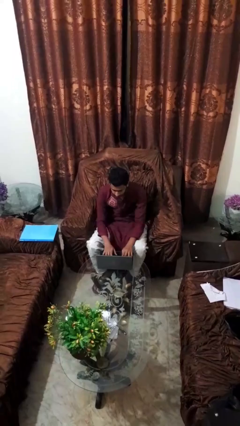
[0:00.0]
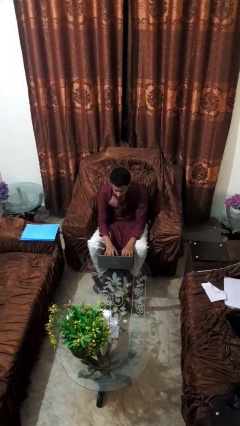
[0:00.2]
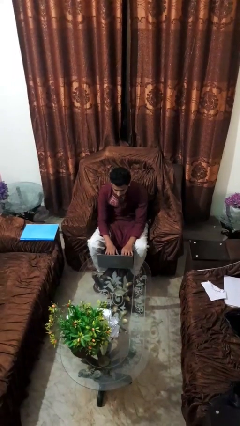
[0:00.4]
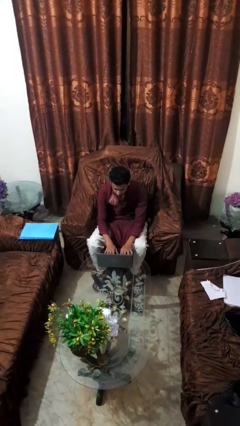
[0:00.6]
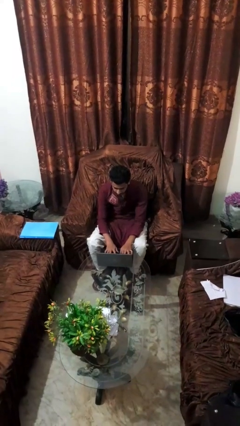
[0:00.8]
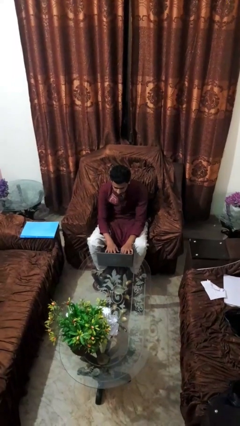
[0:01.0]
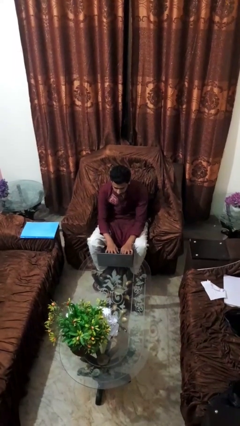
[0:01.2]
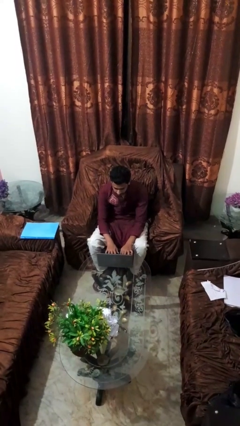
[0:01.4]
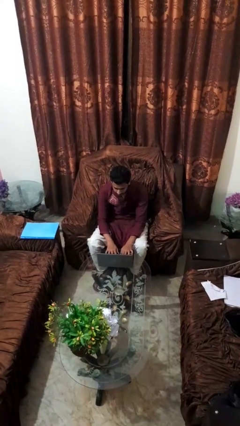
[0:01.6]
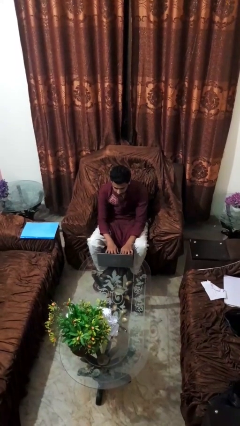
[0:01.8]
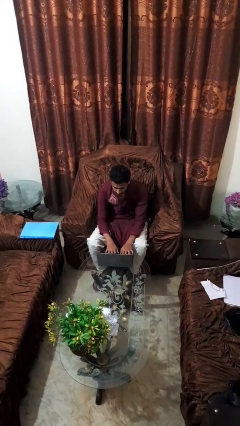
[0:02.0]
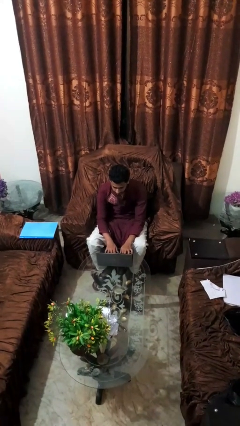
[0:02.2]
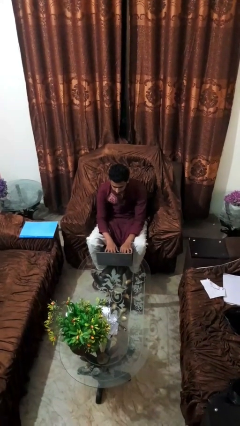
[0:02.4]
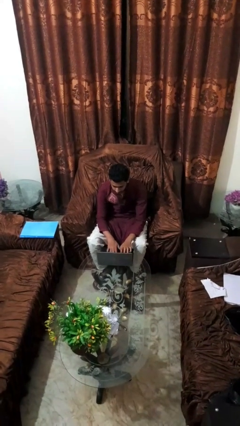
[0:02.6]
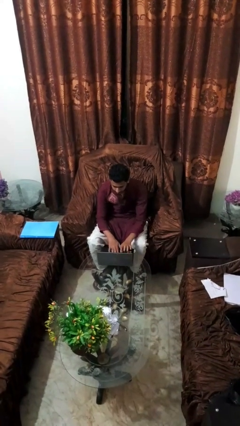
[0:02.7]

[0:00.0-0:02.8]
person interacts with laptop

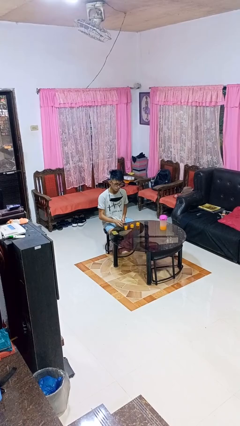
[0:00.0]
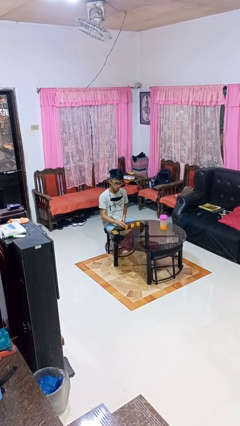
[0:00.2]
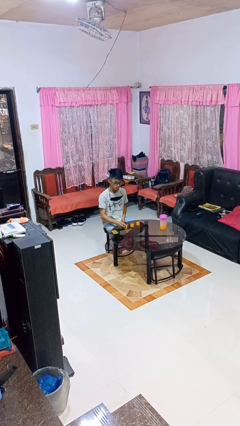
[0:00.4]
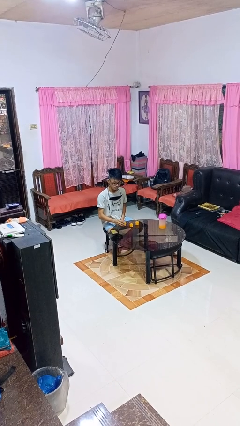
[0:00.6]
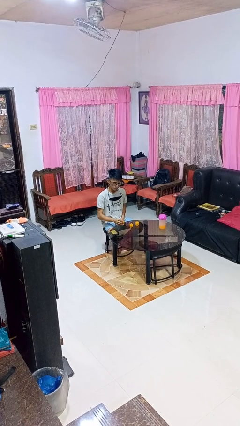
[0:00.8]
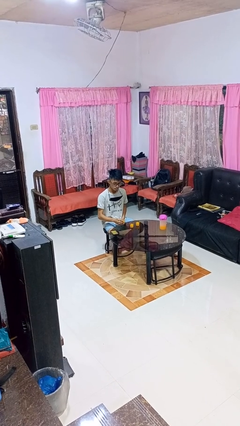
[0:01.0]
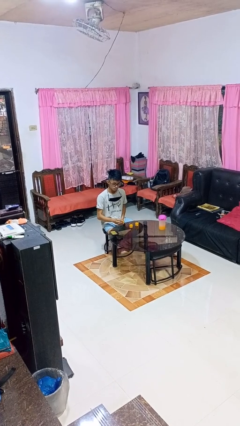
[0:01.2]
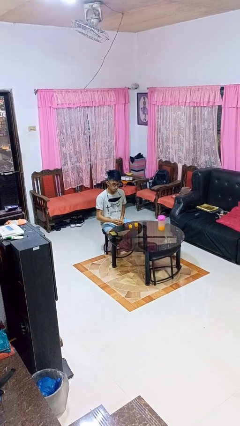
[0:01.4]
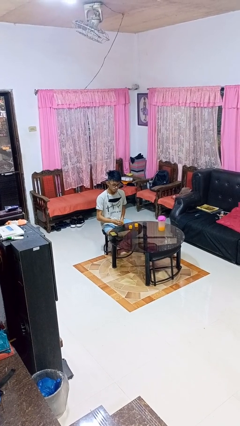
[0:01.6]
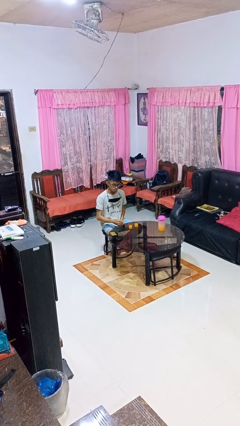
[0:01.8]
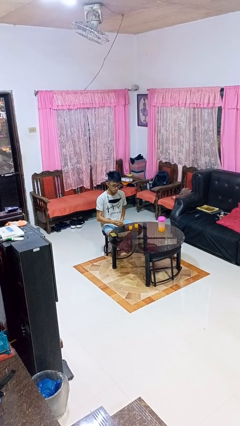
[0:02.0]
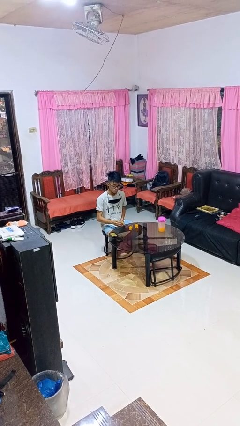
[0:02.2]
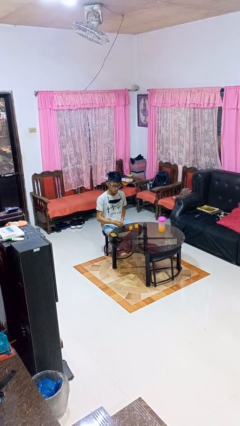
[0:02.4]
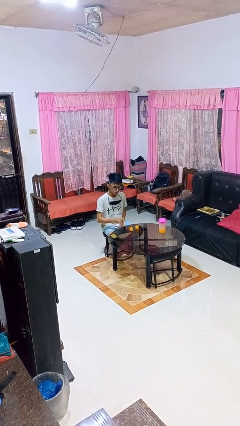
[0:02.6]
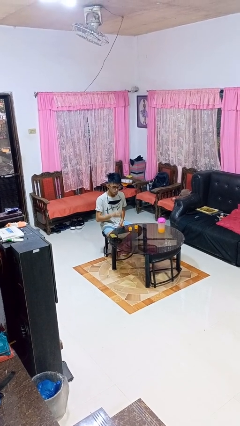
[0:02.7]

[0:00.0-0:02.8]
person picks up object from table

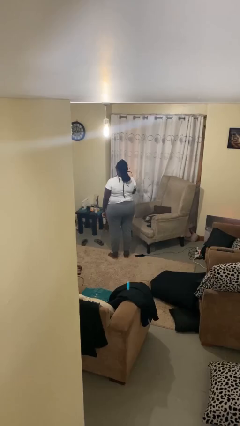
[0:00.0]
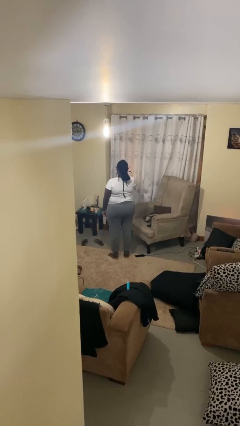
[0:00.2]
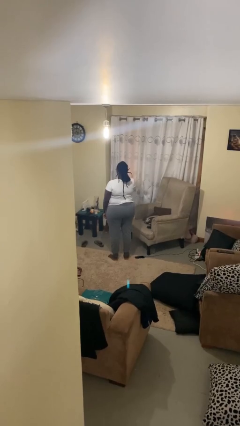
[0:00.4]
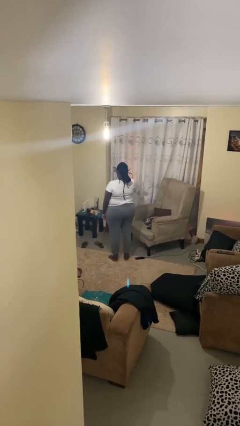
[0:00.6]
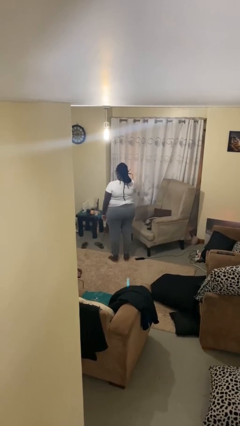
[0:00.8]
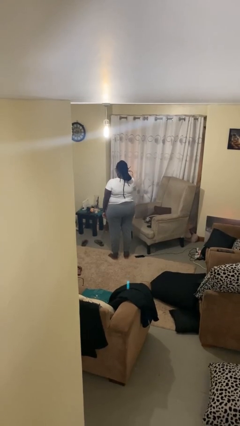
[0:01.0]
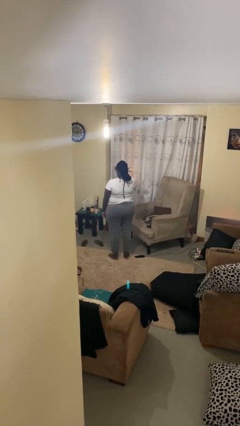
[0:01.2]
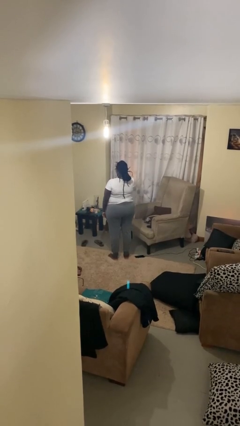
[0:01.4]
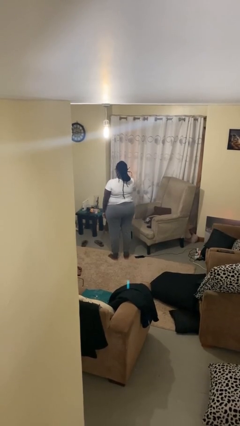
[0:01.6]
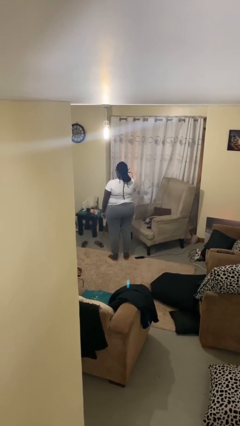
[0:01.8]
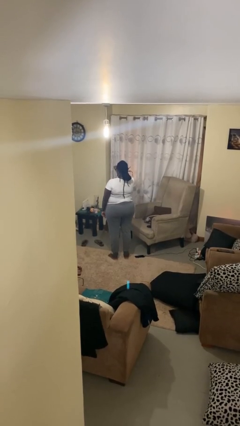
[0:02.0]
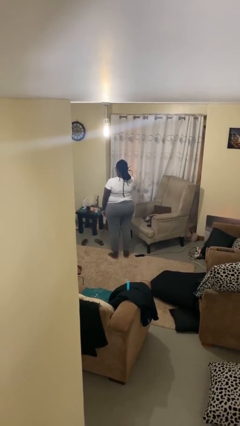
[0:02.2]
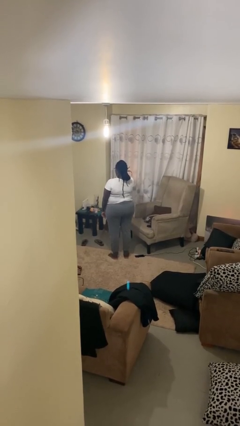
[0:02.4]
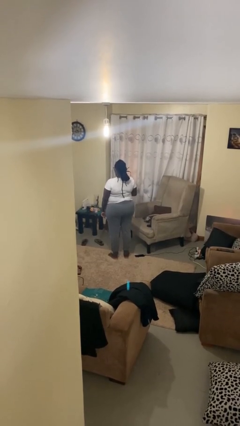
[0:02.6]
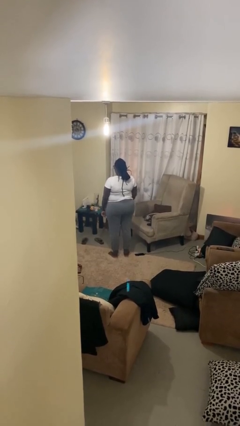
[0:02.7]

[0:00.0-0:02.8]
person snaps fingers

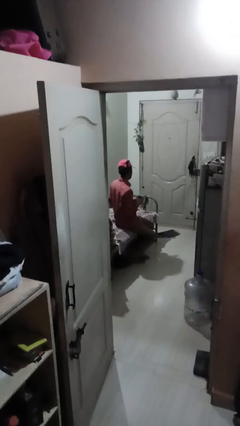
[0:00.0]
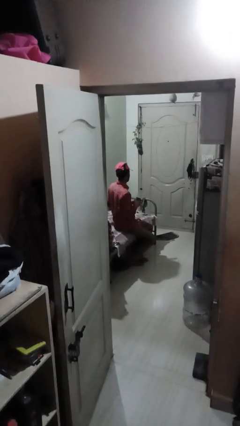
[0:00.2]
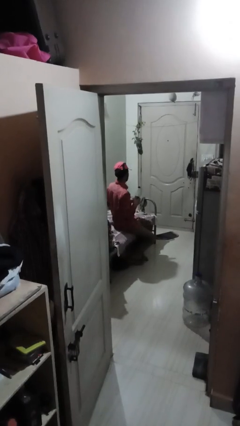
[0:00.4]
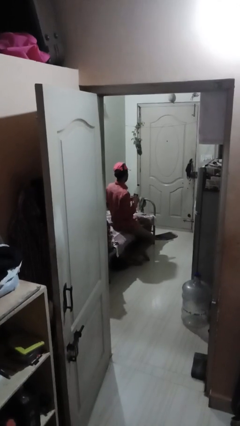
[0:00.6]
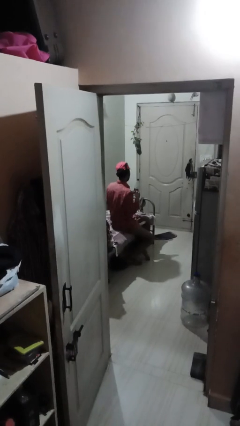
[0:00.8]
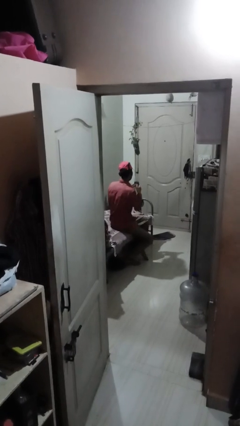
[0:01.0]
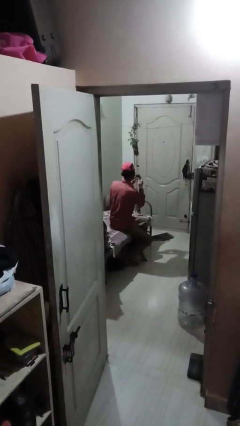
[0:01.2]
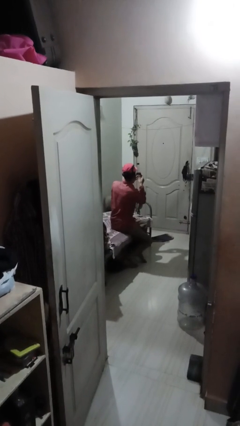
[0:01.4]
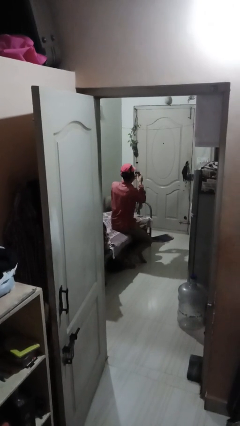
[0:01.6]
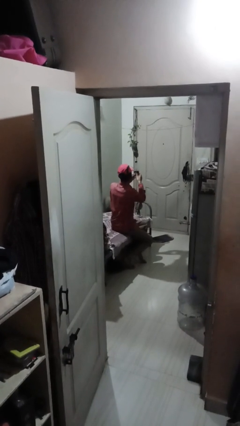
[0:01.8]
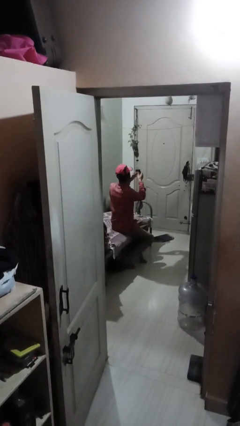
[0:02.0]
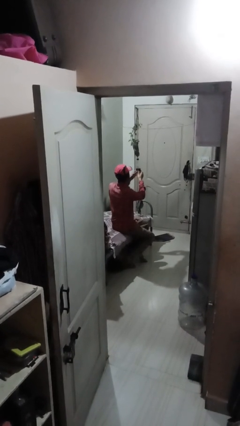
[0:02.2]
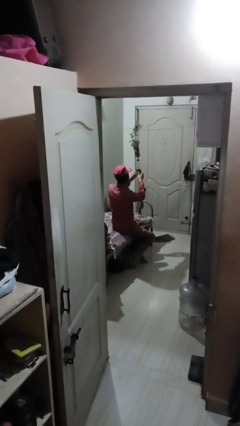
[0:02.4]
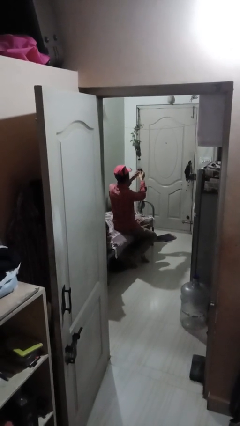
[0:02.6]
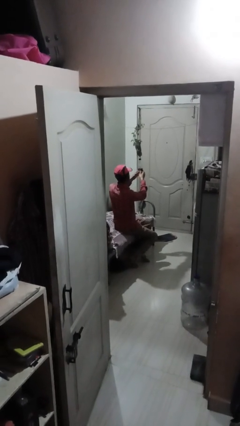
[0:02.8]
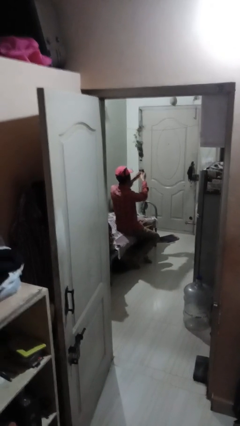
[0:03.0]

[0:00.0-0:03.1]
person squeezes object

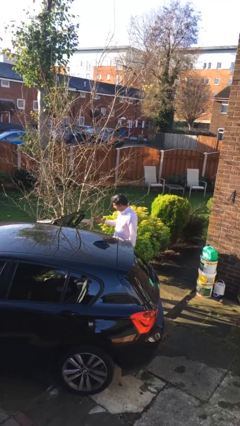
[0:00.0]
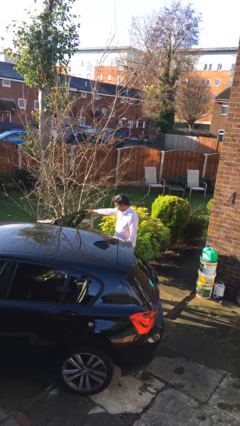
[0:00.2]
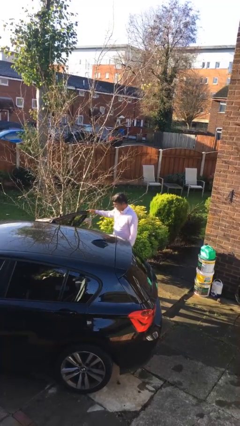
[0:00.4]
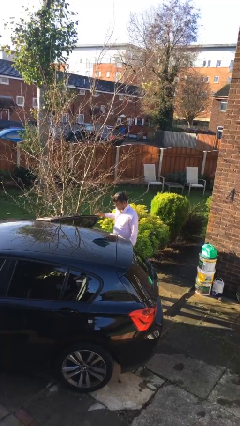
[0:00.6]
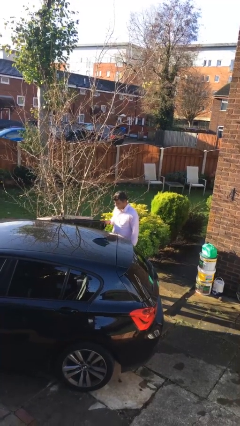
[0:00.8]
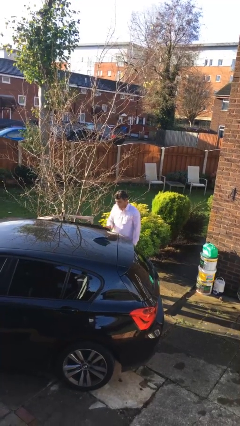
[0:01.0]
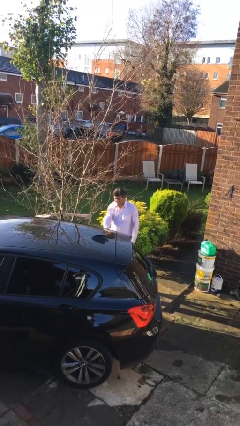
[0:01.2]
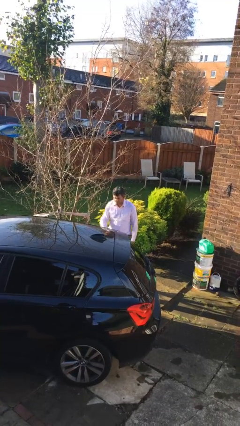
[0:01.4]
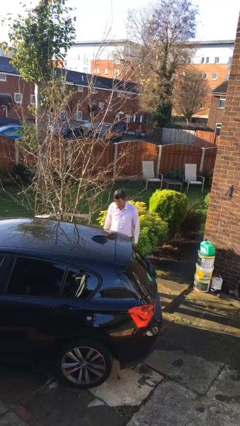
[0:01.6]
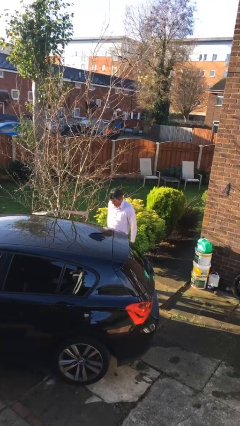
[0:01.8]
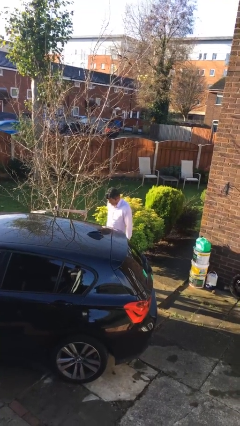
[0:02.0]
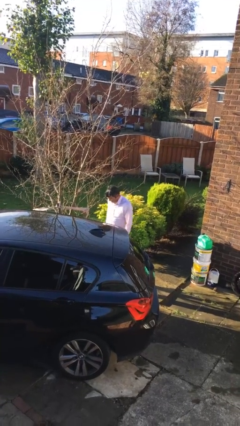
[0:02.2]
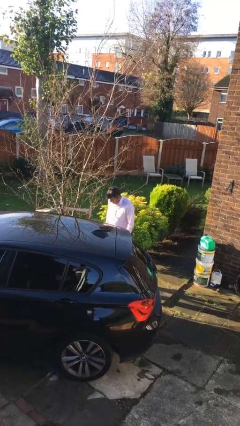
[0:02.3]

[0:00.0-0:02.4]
person closes car door

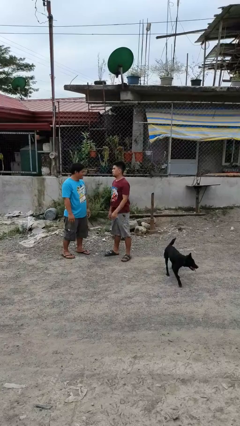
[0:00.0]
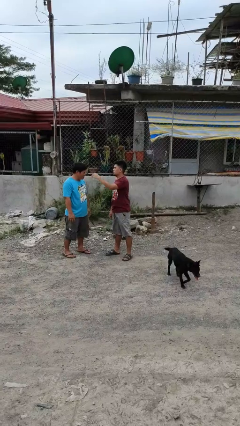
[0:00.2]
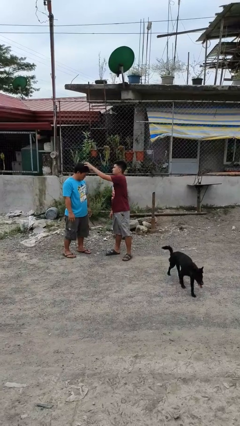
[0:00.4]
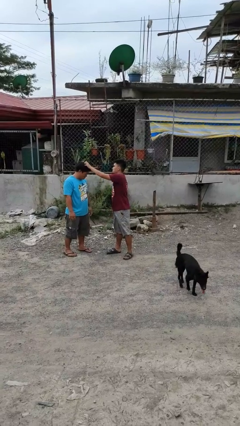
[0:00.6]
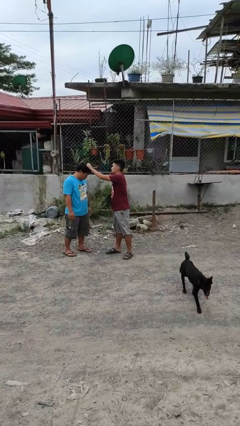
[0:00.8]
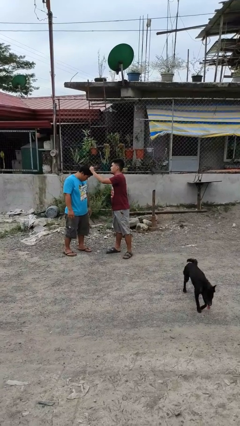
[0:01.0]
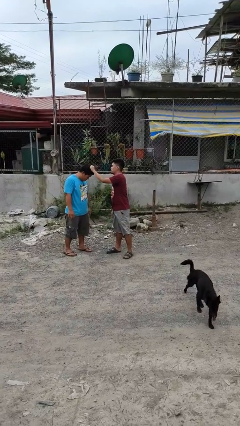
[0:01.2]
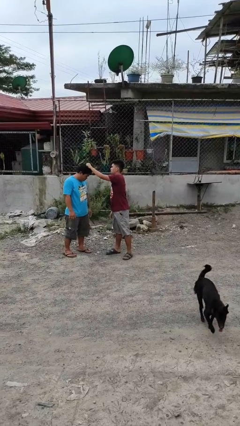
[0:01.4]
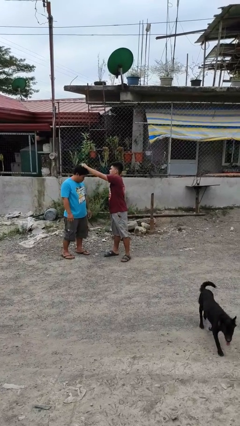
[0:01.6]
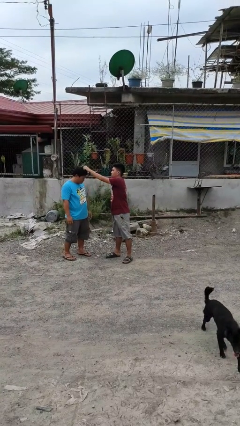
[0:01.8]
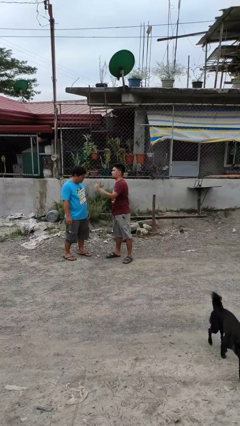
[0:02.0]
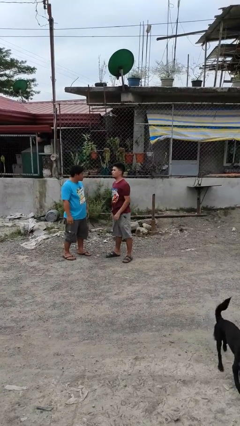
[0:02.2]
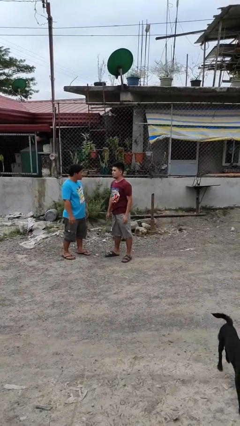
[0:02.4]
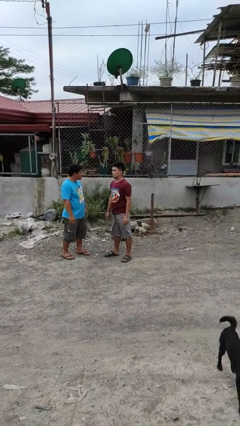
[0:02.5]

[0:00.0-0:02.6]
person grabs person by hair

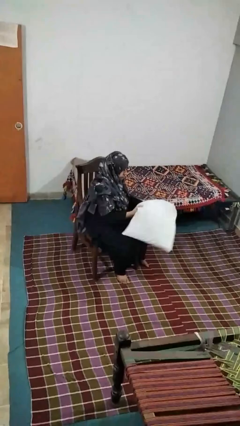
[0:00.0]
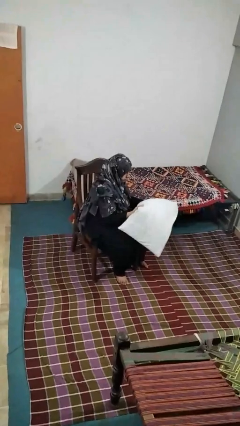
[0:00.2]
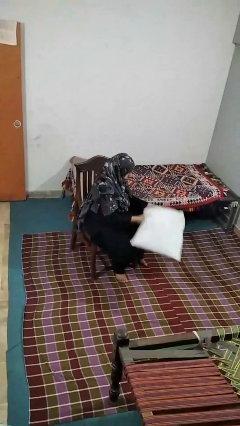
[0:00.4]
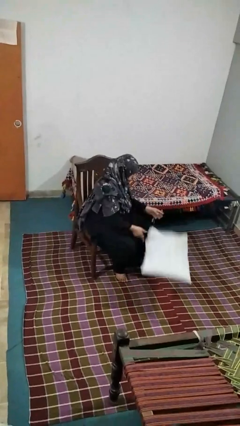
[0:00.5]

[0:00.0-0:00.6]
person drops object

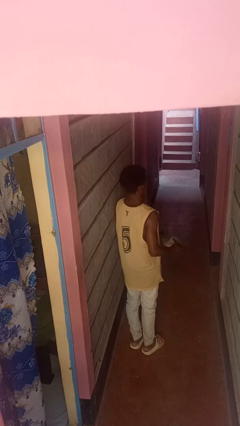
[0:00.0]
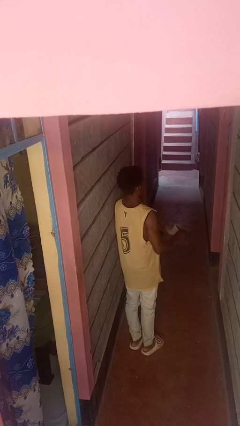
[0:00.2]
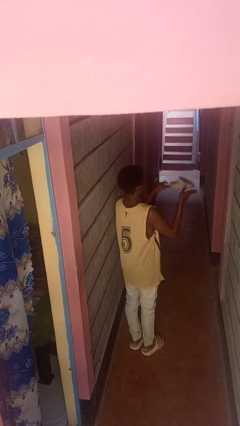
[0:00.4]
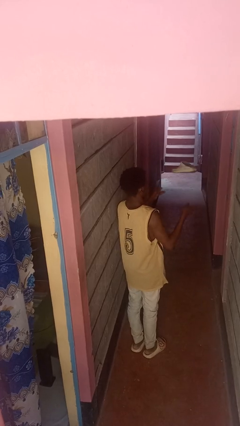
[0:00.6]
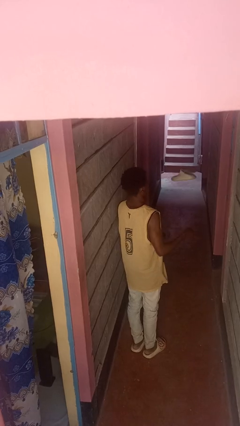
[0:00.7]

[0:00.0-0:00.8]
person throws object into air
